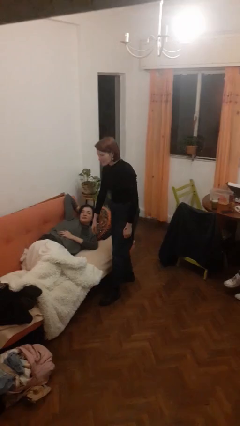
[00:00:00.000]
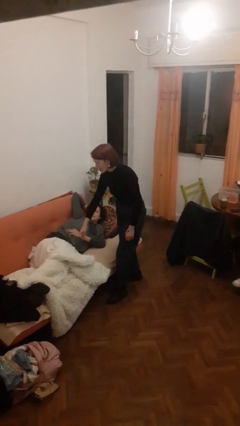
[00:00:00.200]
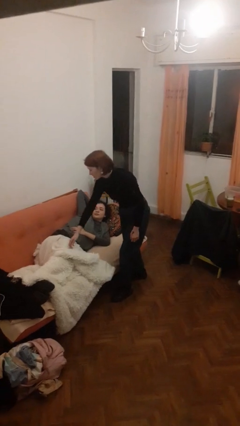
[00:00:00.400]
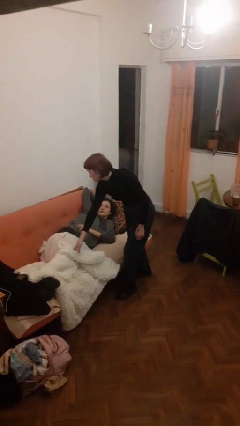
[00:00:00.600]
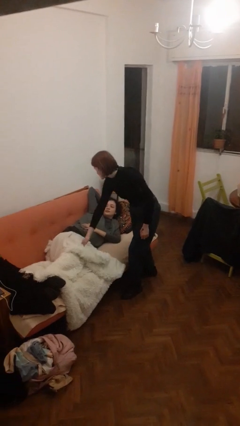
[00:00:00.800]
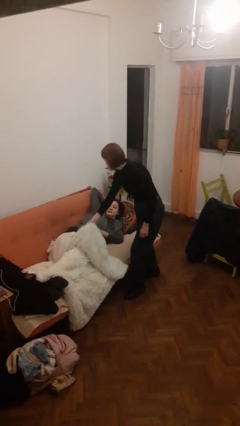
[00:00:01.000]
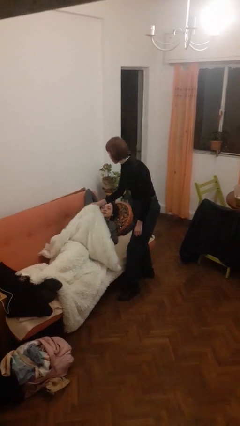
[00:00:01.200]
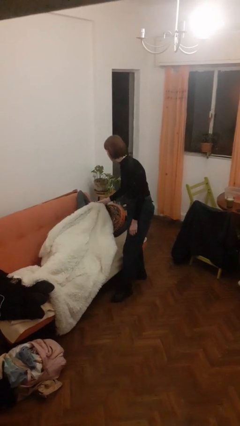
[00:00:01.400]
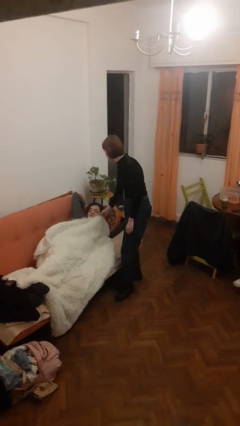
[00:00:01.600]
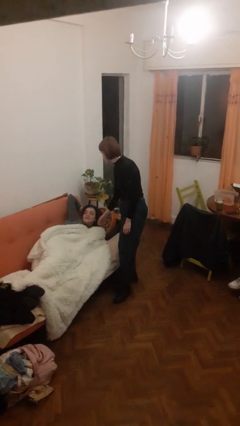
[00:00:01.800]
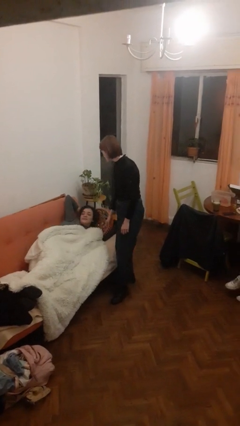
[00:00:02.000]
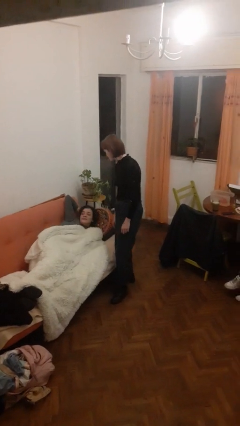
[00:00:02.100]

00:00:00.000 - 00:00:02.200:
person covers friend with blanket

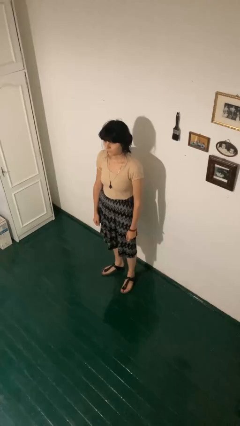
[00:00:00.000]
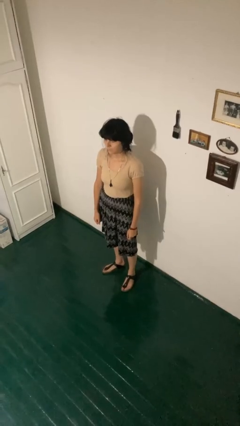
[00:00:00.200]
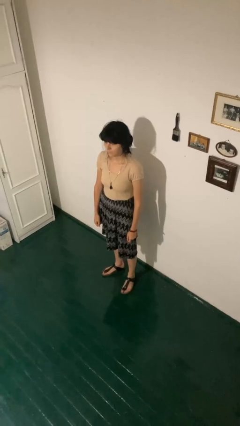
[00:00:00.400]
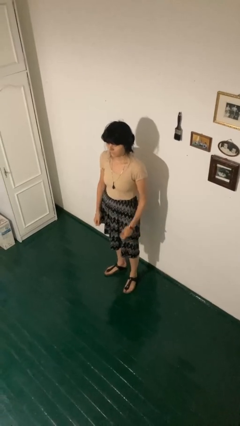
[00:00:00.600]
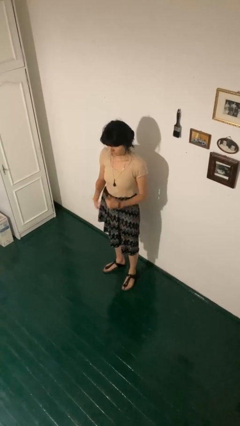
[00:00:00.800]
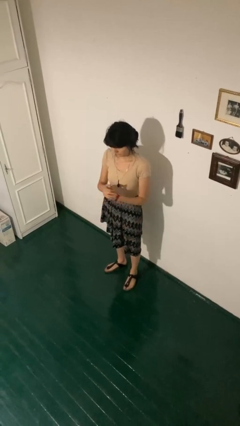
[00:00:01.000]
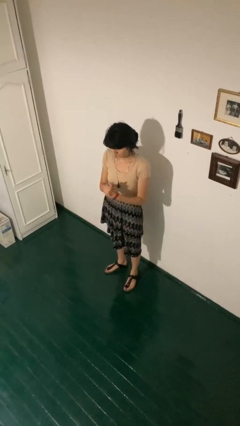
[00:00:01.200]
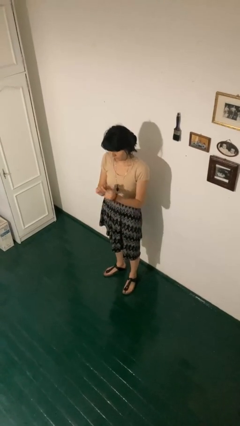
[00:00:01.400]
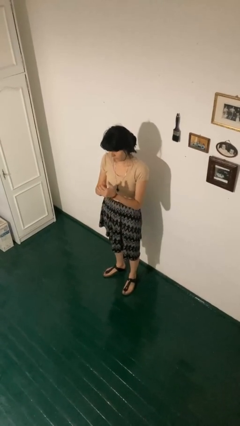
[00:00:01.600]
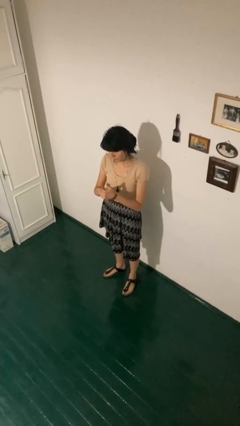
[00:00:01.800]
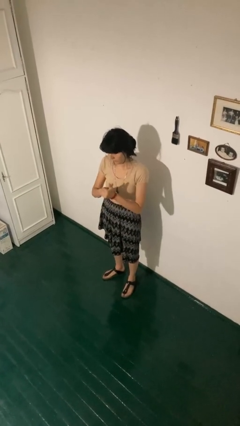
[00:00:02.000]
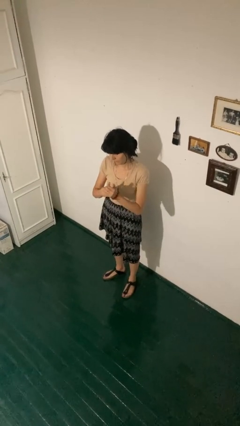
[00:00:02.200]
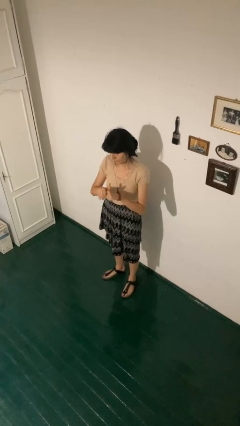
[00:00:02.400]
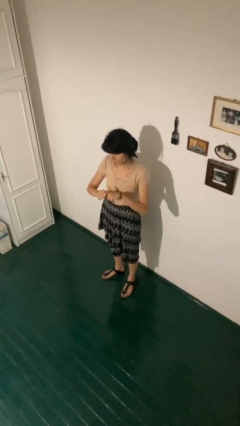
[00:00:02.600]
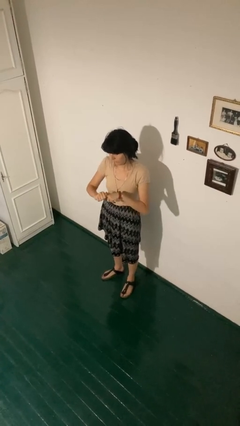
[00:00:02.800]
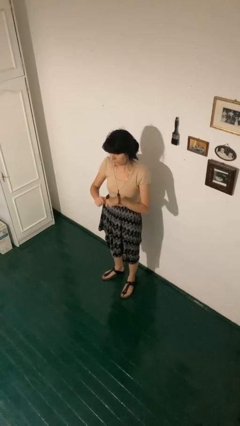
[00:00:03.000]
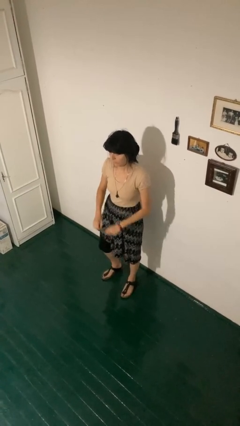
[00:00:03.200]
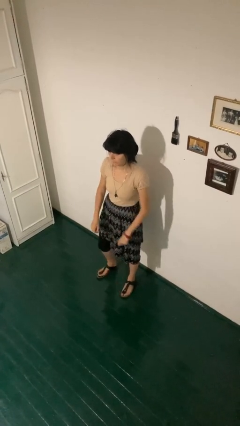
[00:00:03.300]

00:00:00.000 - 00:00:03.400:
person cracks knuckles

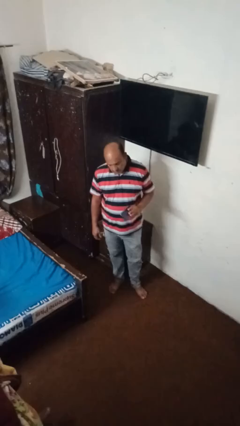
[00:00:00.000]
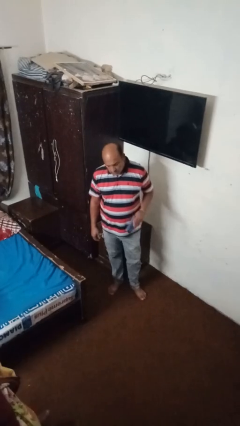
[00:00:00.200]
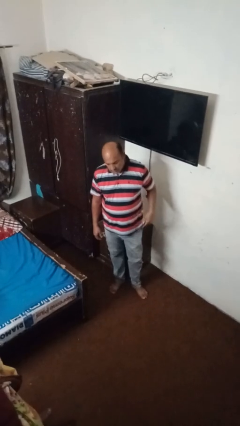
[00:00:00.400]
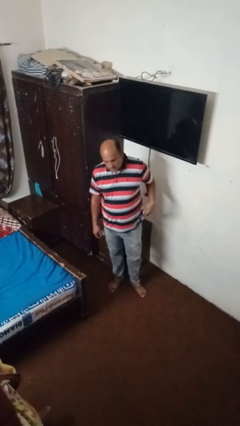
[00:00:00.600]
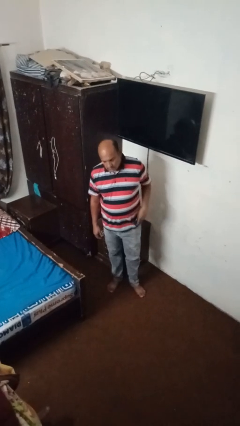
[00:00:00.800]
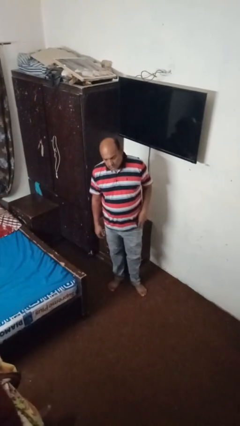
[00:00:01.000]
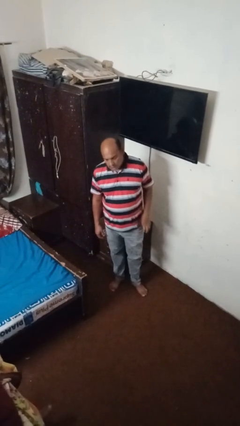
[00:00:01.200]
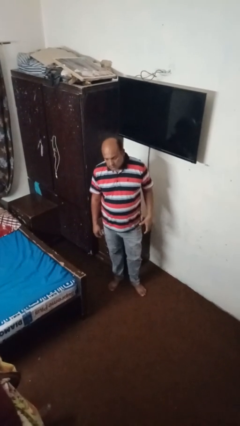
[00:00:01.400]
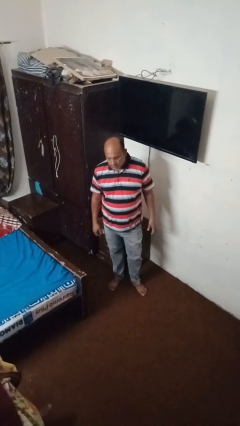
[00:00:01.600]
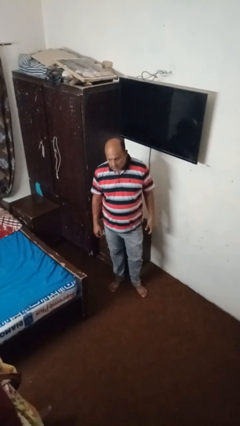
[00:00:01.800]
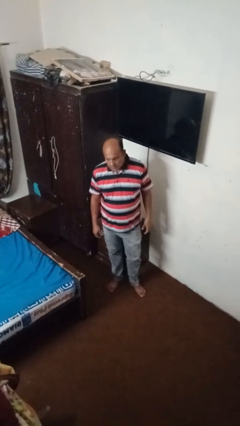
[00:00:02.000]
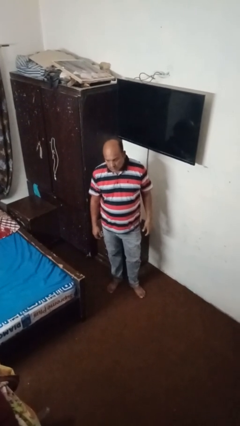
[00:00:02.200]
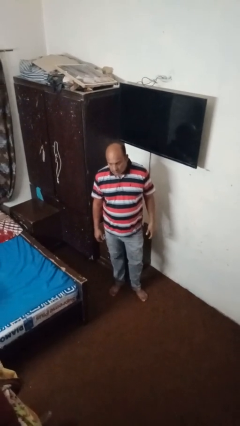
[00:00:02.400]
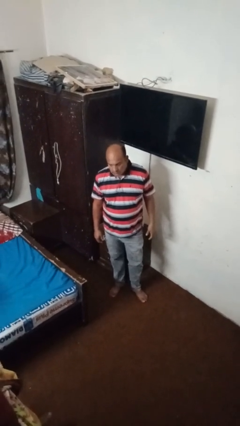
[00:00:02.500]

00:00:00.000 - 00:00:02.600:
person puts phone into pocket

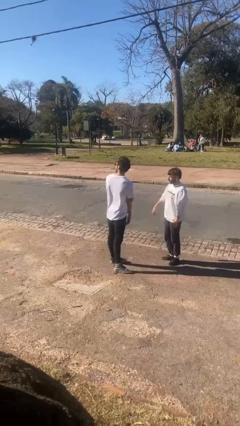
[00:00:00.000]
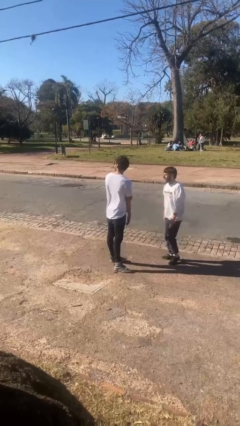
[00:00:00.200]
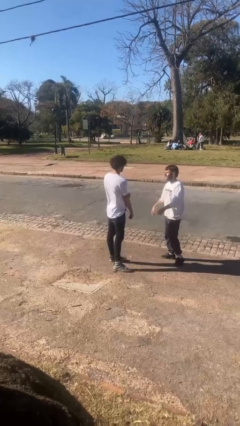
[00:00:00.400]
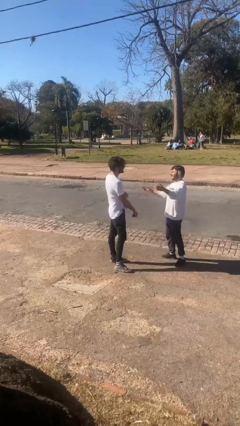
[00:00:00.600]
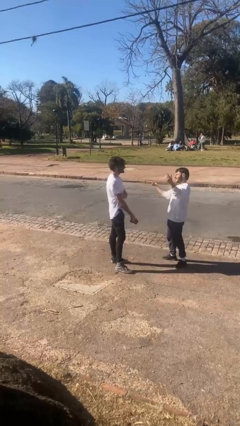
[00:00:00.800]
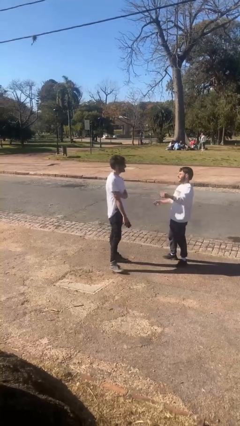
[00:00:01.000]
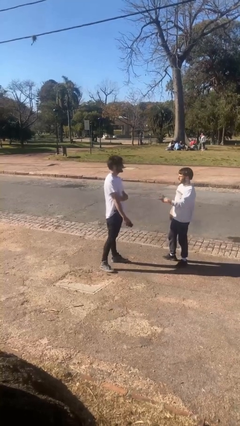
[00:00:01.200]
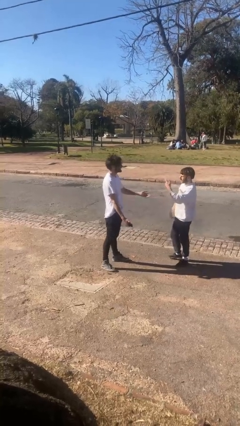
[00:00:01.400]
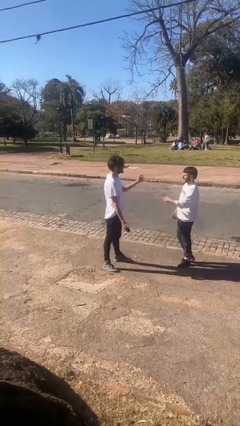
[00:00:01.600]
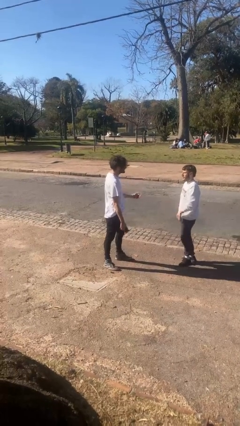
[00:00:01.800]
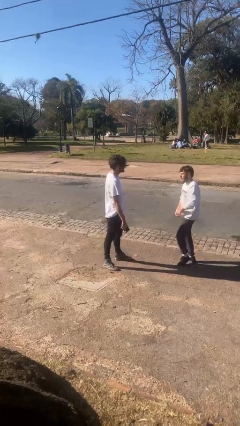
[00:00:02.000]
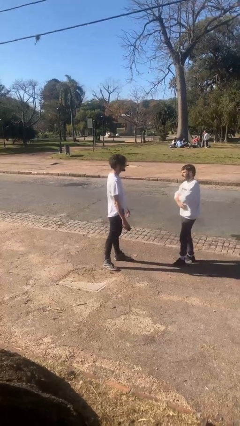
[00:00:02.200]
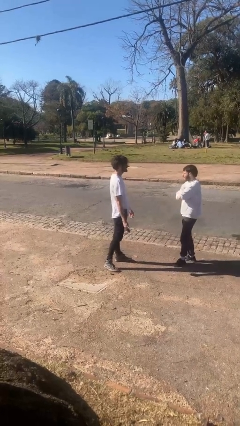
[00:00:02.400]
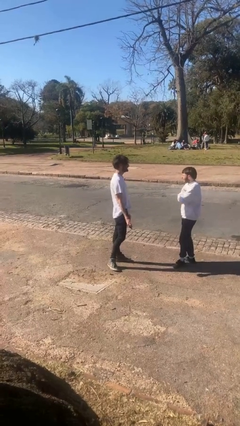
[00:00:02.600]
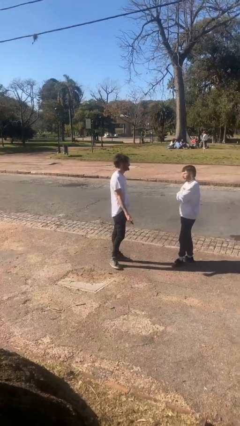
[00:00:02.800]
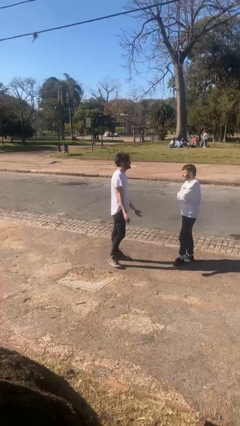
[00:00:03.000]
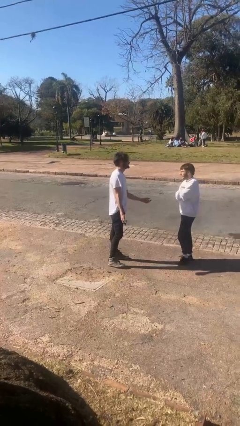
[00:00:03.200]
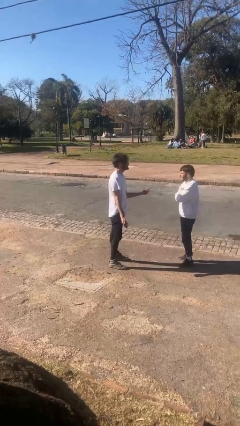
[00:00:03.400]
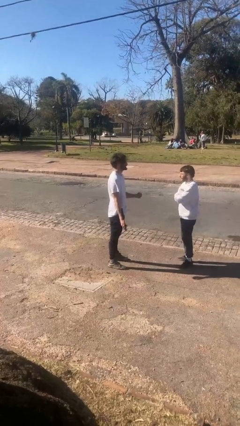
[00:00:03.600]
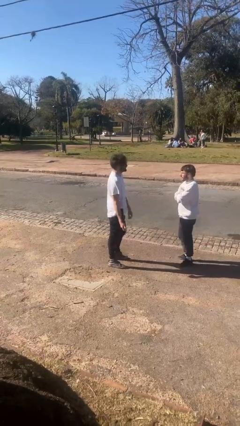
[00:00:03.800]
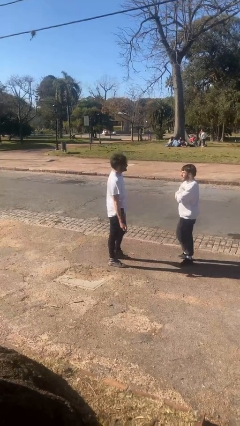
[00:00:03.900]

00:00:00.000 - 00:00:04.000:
person talks to person

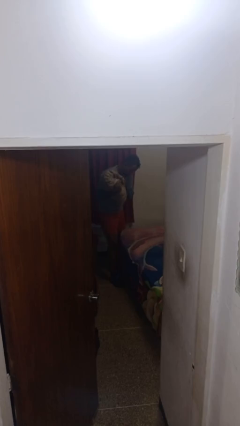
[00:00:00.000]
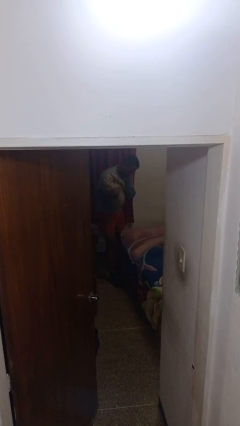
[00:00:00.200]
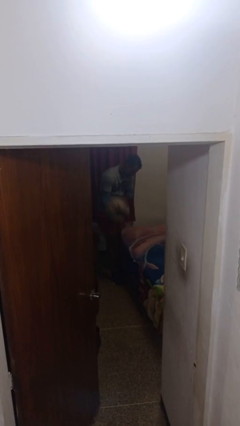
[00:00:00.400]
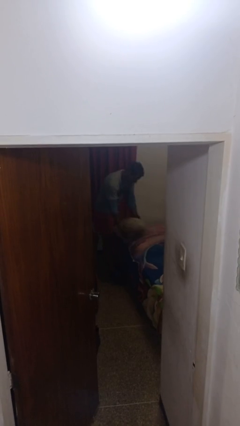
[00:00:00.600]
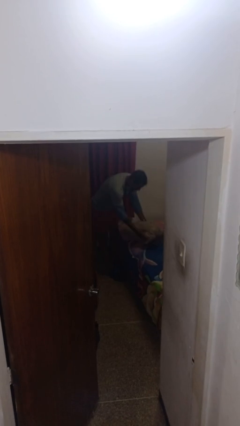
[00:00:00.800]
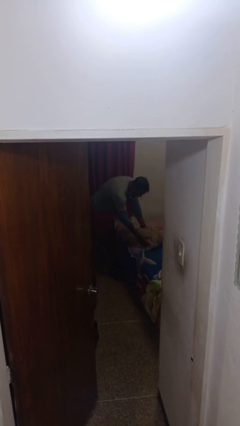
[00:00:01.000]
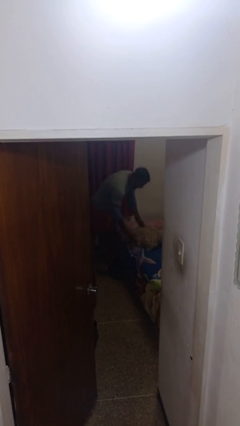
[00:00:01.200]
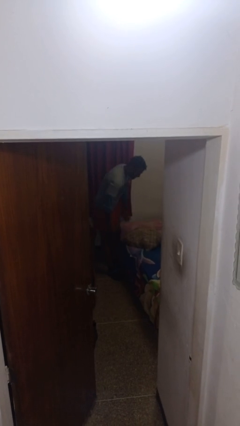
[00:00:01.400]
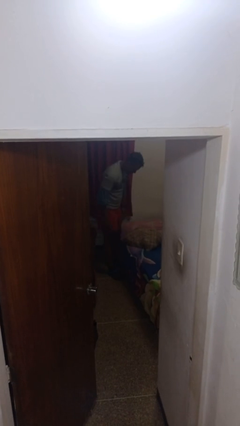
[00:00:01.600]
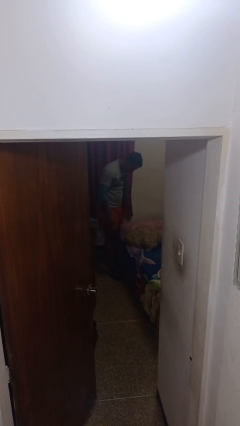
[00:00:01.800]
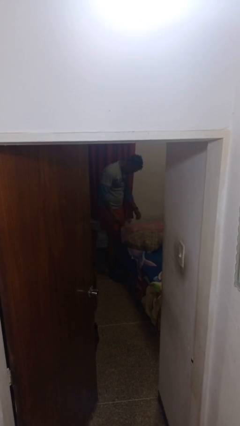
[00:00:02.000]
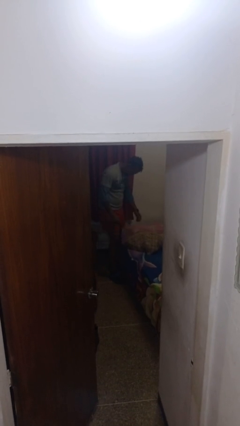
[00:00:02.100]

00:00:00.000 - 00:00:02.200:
person puts down object on bed

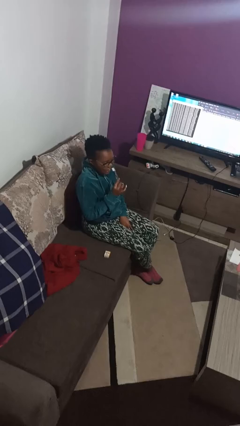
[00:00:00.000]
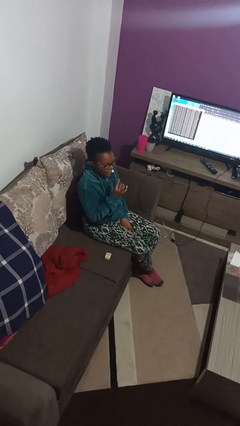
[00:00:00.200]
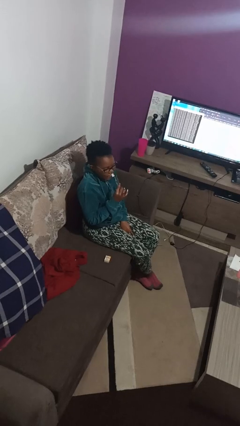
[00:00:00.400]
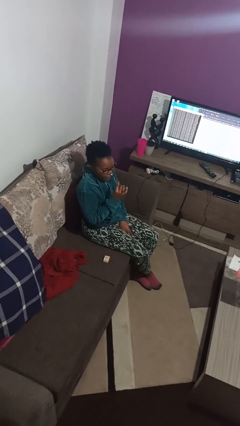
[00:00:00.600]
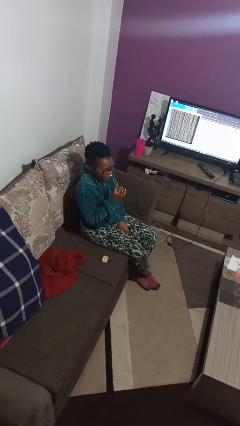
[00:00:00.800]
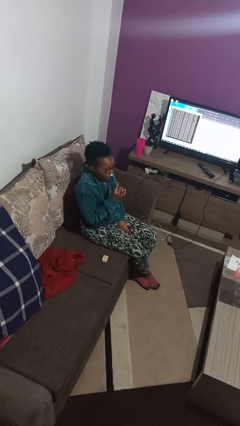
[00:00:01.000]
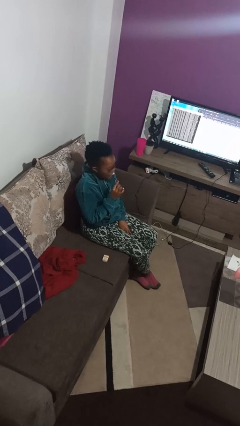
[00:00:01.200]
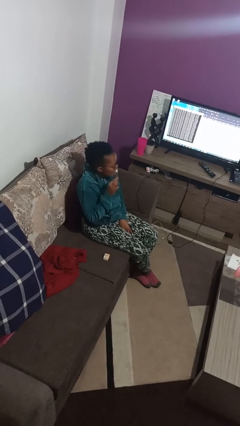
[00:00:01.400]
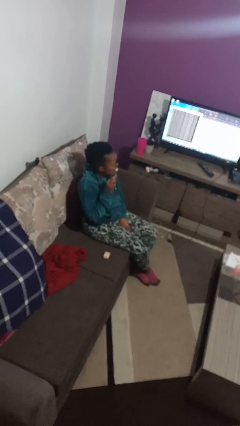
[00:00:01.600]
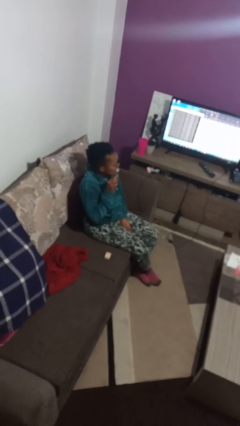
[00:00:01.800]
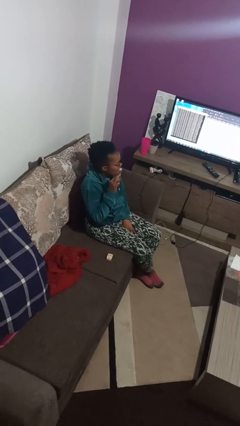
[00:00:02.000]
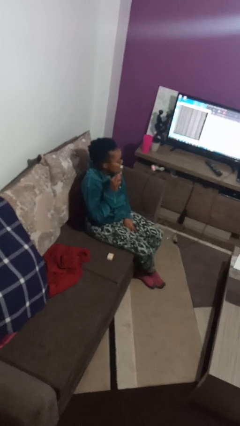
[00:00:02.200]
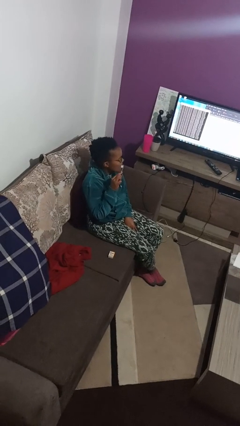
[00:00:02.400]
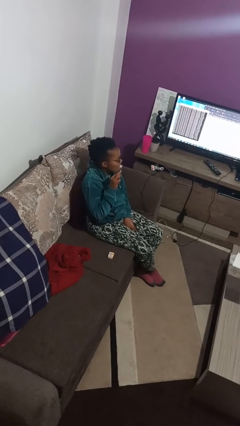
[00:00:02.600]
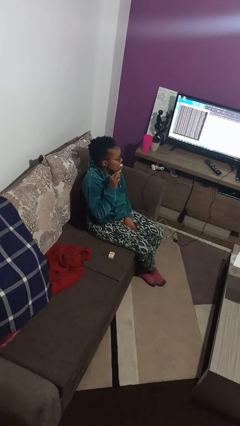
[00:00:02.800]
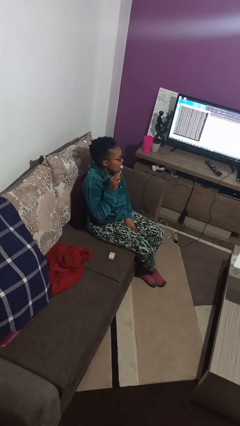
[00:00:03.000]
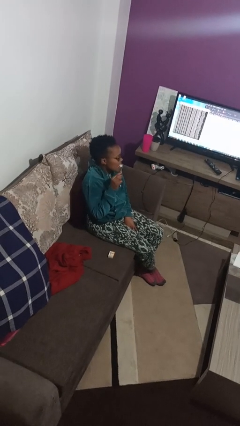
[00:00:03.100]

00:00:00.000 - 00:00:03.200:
person brushes teeth
